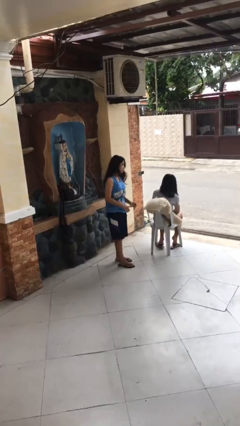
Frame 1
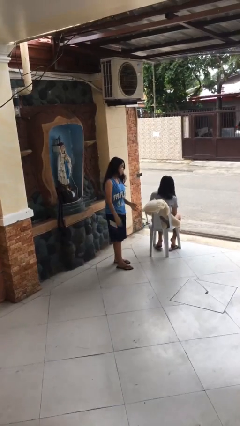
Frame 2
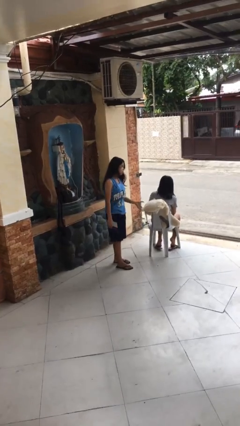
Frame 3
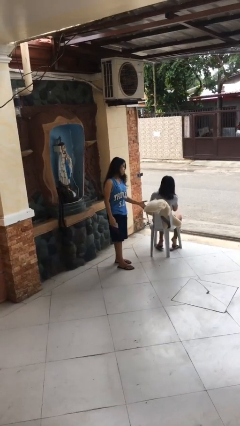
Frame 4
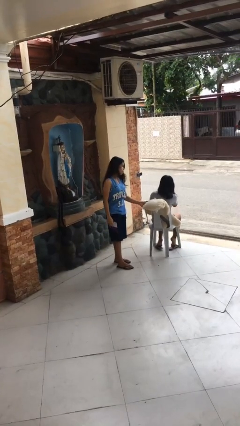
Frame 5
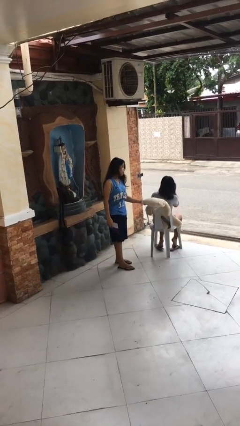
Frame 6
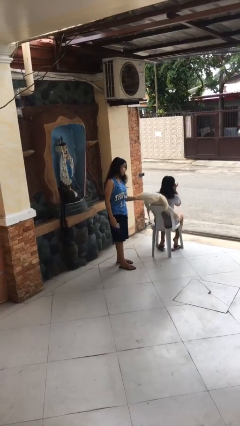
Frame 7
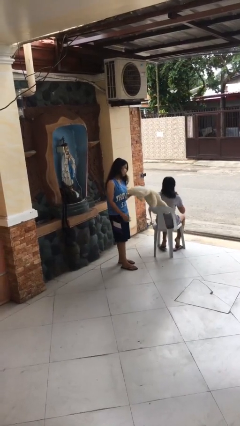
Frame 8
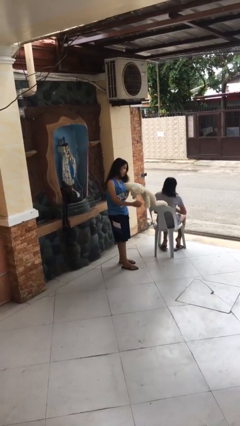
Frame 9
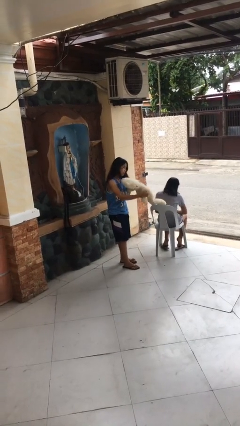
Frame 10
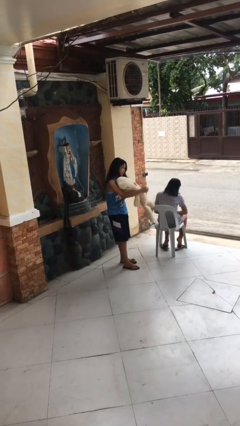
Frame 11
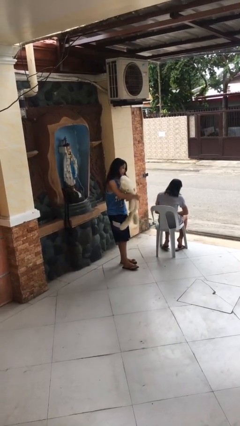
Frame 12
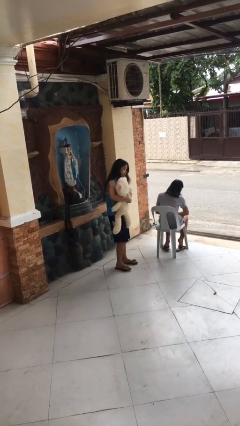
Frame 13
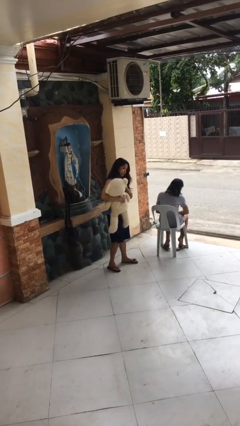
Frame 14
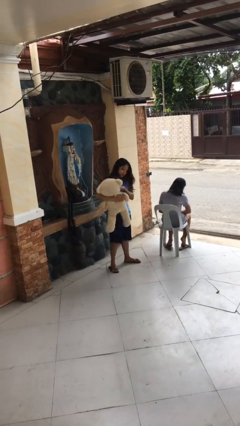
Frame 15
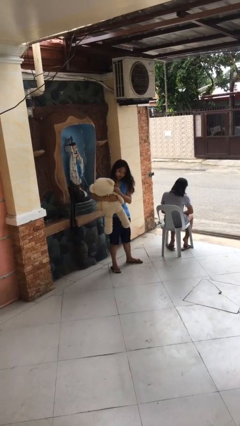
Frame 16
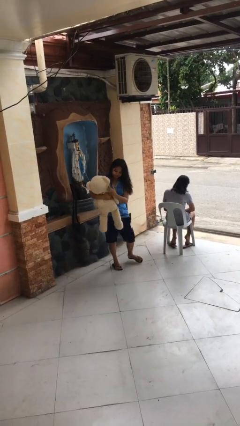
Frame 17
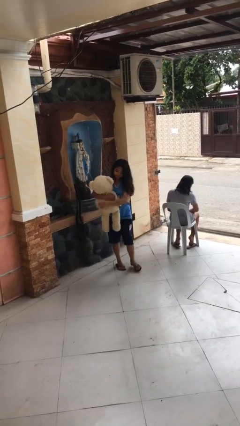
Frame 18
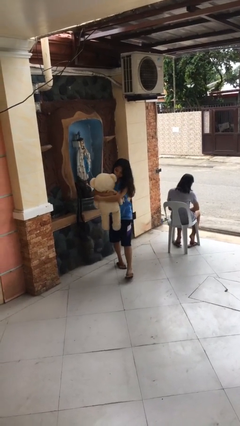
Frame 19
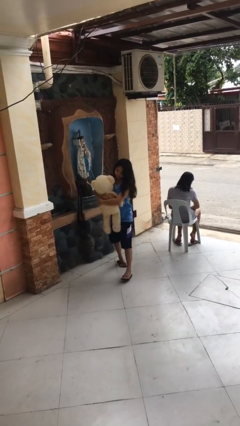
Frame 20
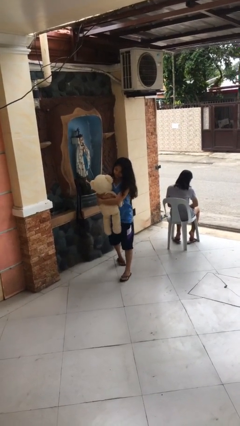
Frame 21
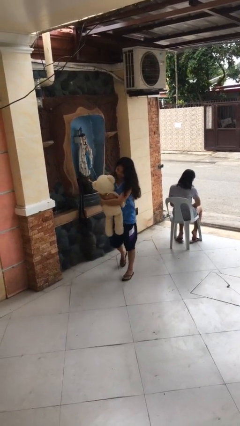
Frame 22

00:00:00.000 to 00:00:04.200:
person steals object from person

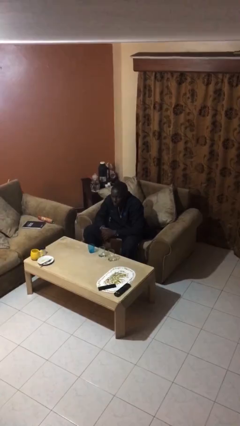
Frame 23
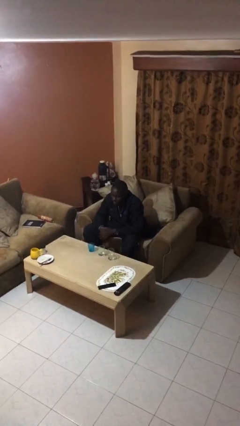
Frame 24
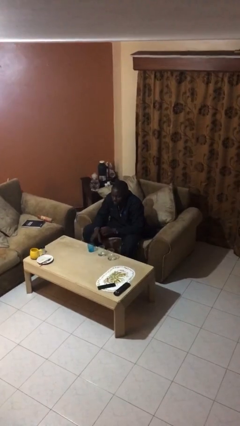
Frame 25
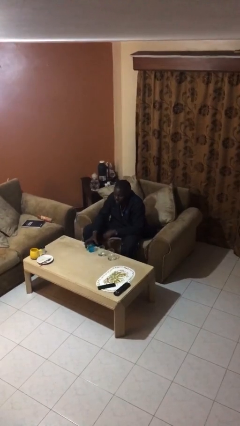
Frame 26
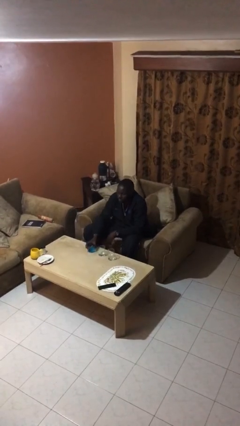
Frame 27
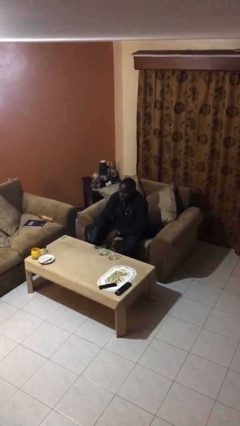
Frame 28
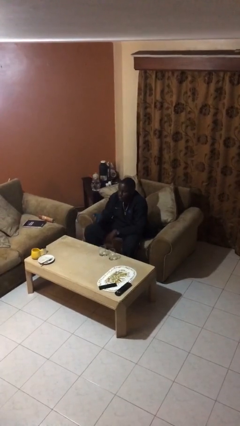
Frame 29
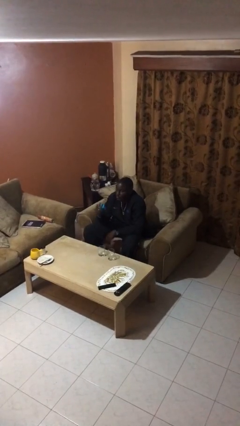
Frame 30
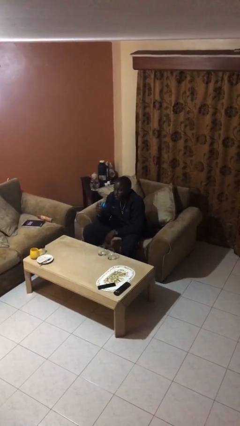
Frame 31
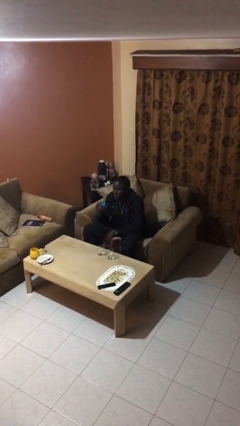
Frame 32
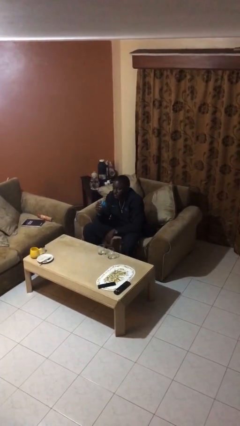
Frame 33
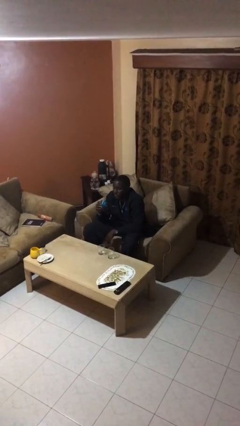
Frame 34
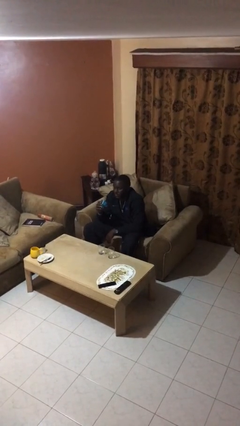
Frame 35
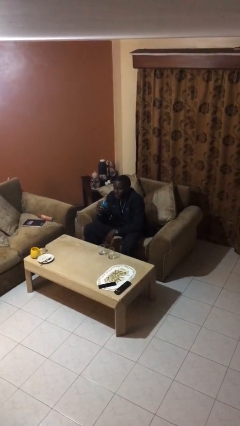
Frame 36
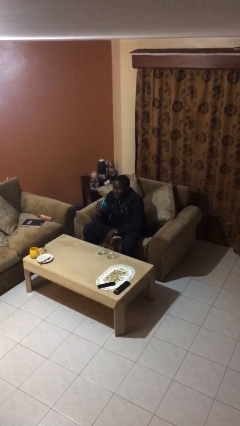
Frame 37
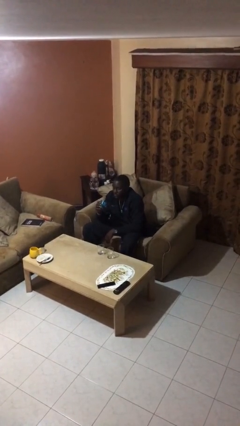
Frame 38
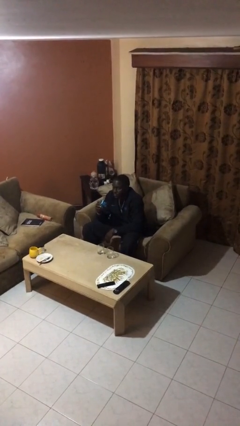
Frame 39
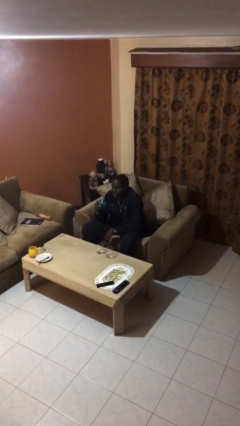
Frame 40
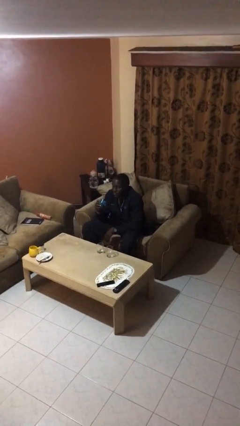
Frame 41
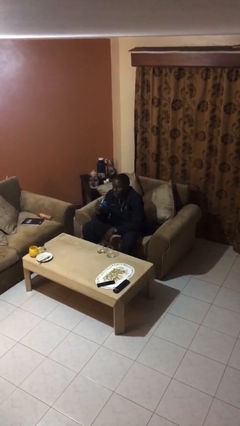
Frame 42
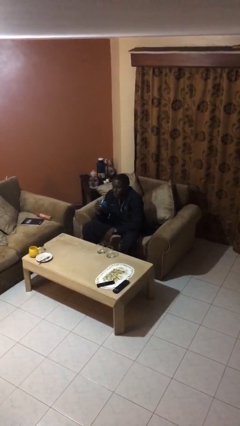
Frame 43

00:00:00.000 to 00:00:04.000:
person picks up object from table

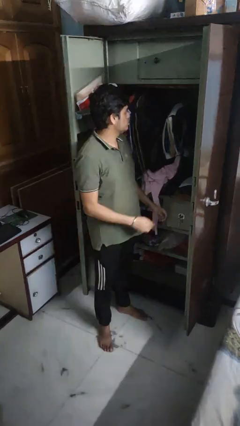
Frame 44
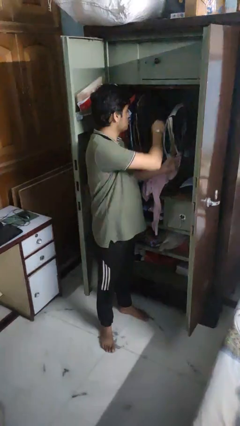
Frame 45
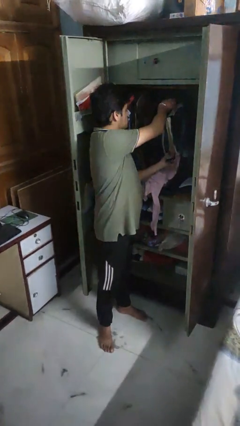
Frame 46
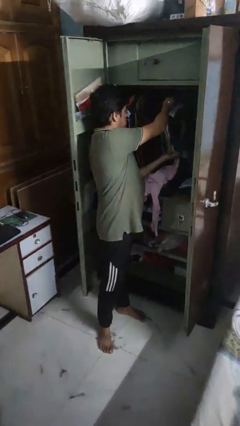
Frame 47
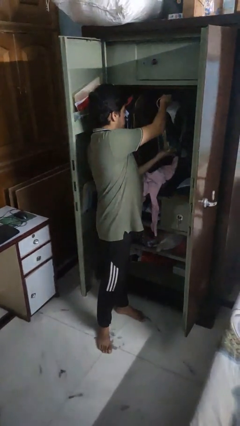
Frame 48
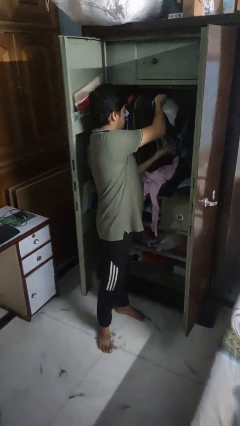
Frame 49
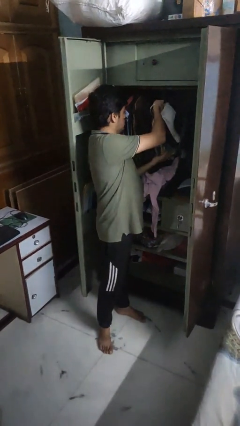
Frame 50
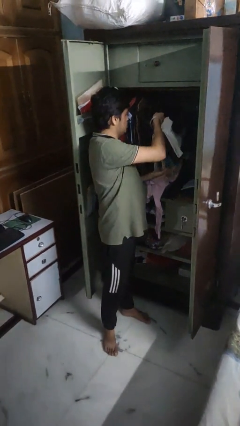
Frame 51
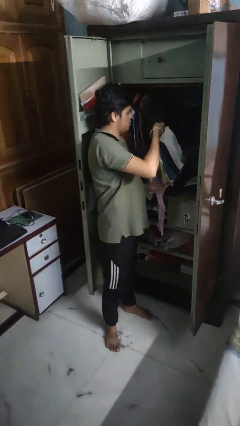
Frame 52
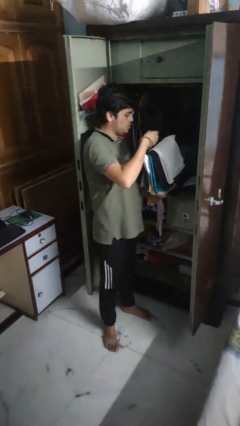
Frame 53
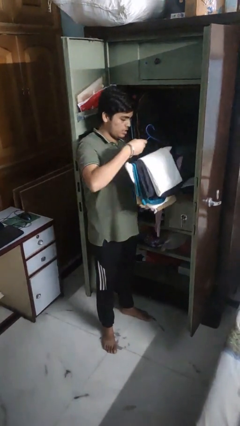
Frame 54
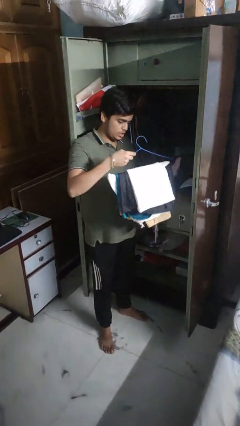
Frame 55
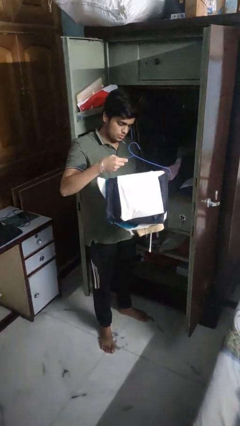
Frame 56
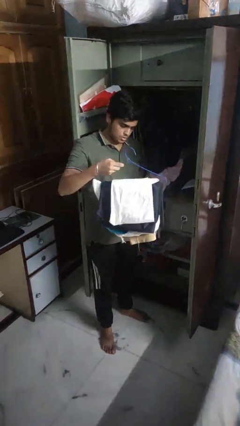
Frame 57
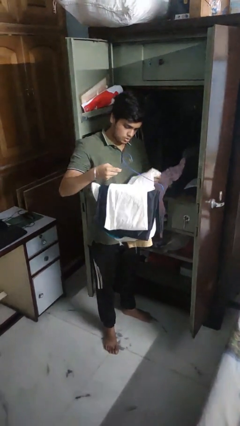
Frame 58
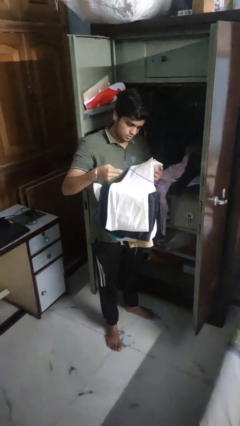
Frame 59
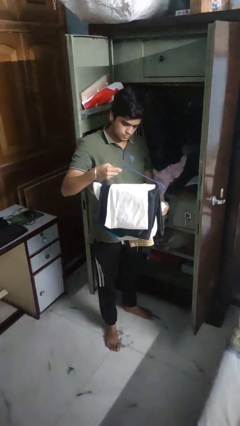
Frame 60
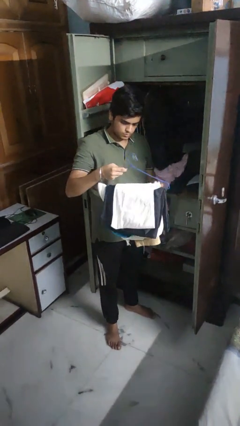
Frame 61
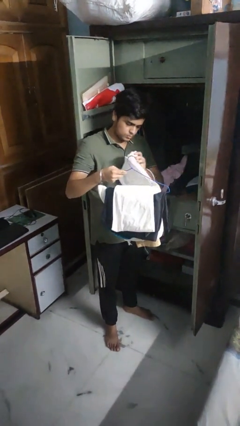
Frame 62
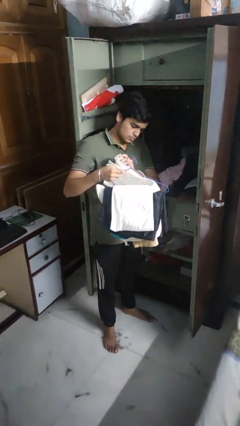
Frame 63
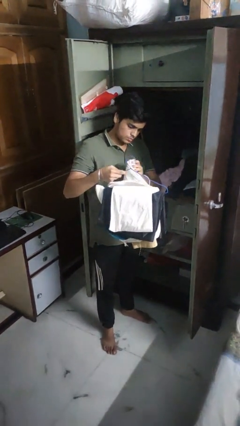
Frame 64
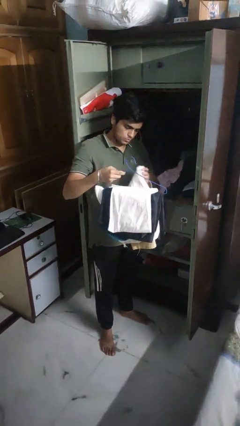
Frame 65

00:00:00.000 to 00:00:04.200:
person takes clothes from closet

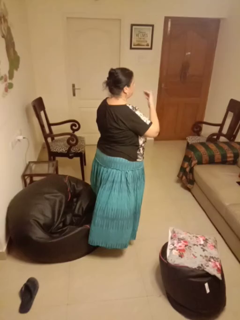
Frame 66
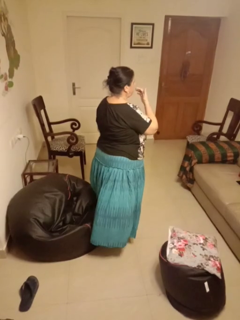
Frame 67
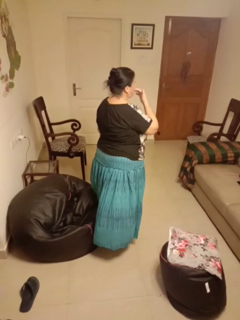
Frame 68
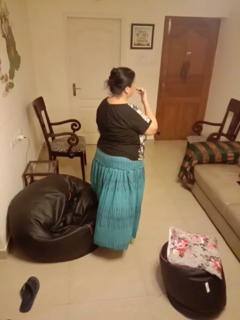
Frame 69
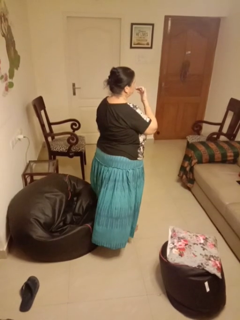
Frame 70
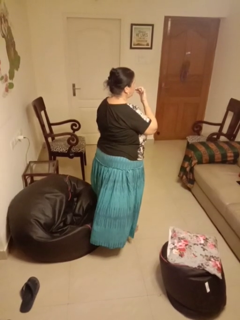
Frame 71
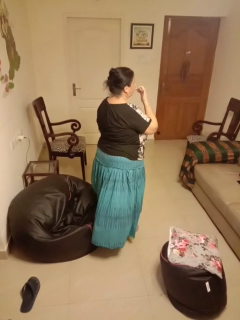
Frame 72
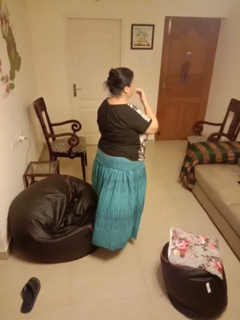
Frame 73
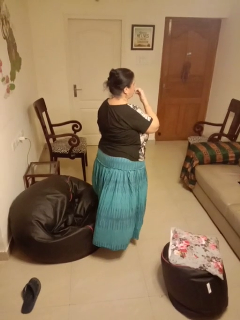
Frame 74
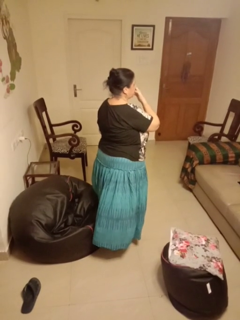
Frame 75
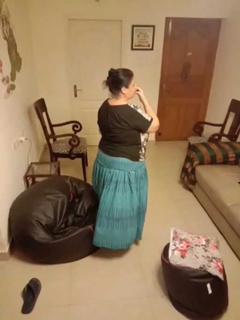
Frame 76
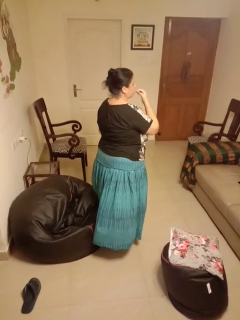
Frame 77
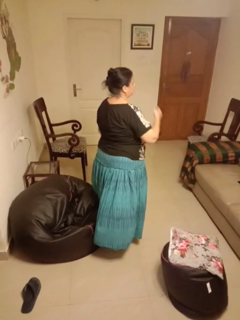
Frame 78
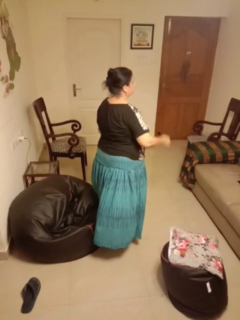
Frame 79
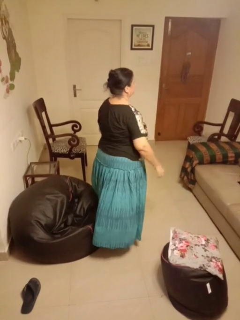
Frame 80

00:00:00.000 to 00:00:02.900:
person licks fingers

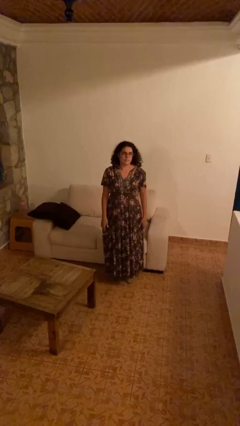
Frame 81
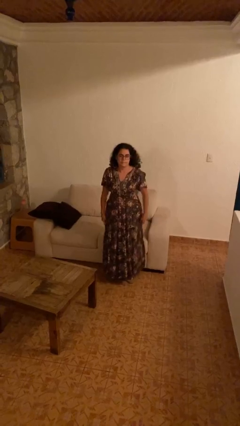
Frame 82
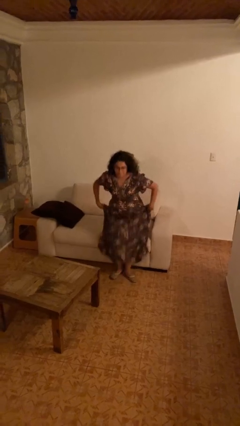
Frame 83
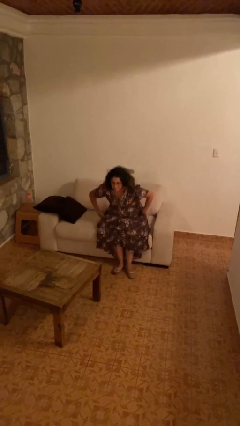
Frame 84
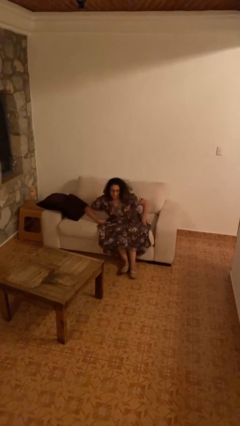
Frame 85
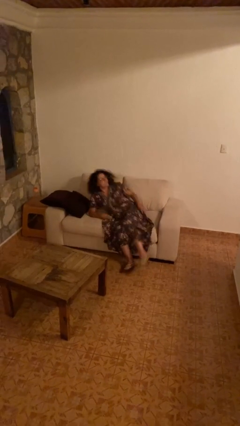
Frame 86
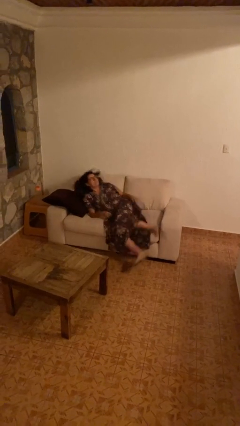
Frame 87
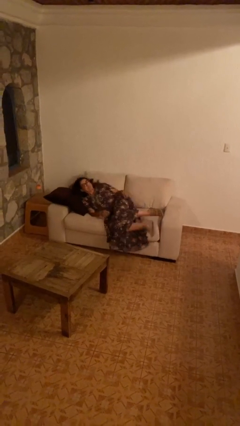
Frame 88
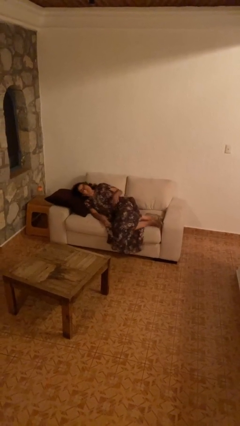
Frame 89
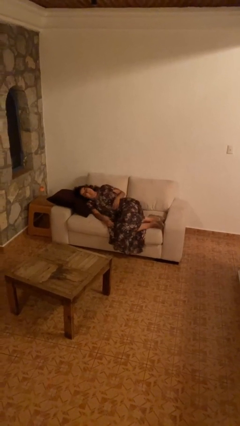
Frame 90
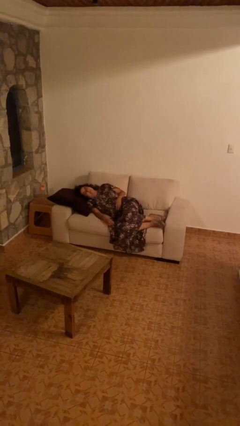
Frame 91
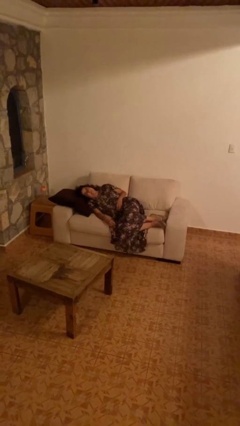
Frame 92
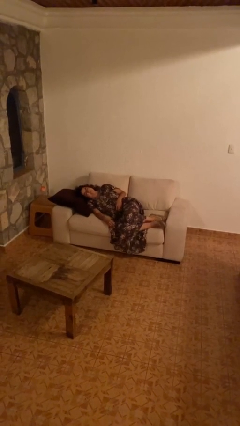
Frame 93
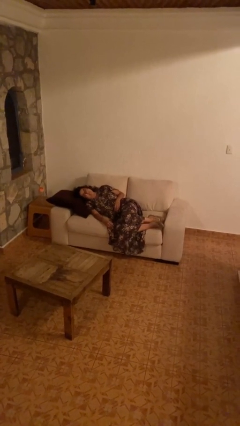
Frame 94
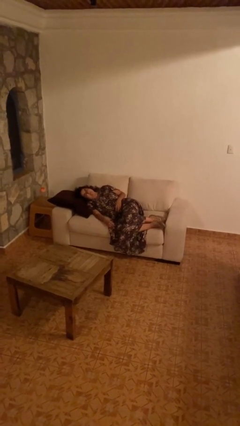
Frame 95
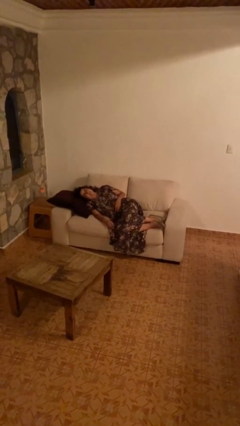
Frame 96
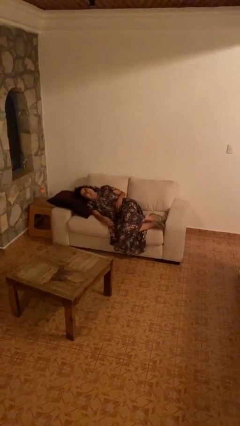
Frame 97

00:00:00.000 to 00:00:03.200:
person lies down on couch
